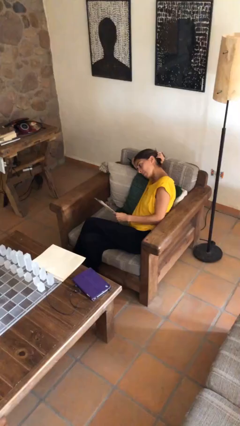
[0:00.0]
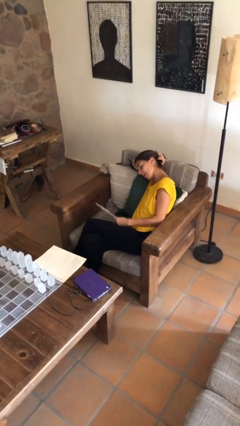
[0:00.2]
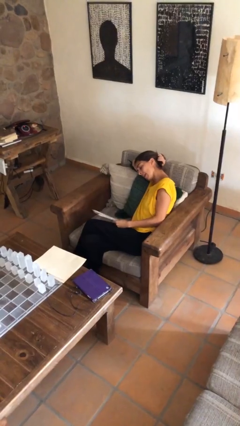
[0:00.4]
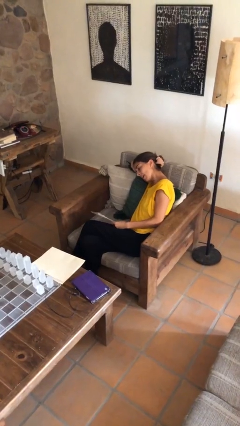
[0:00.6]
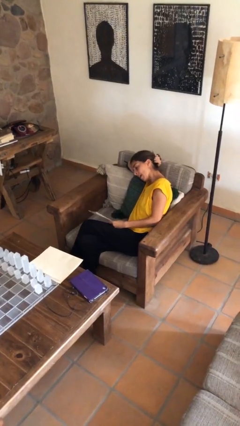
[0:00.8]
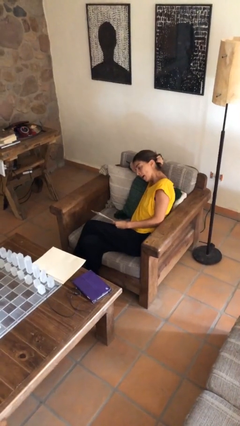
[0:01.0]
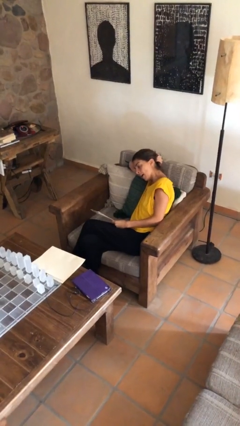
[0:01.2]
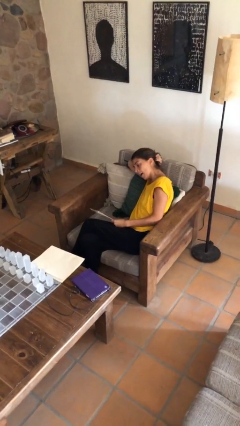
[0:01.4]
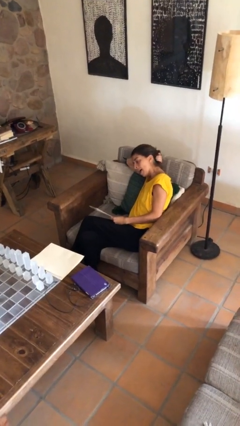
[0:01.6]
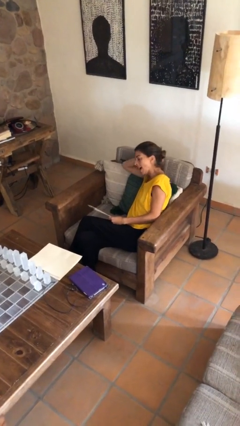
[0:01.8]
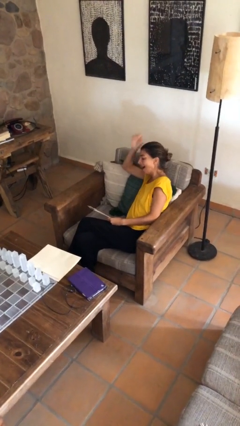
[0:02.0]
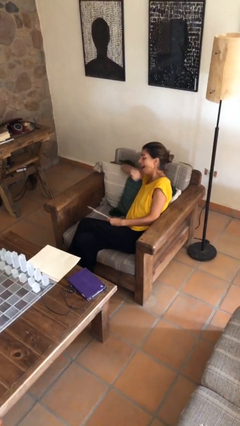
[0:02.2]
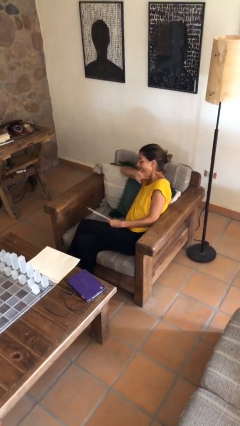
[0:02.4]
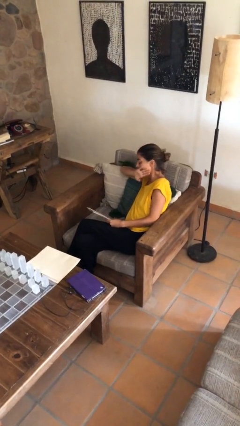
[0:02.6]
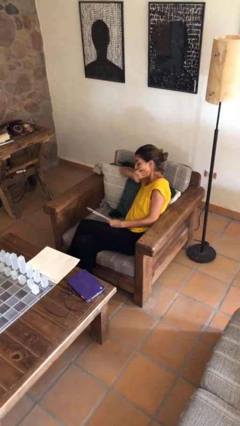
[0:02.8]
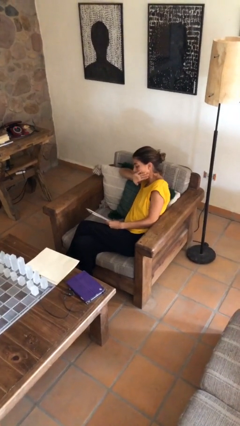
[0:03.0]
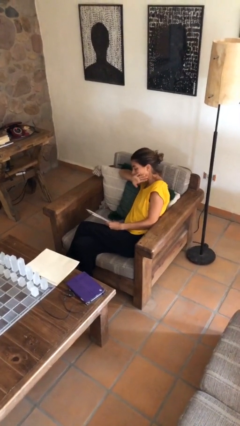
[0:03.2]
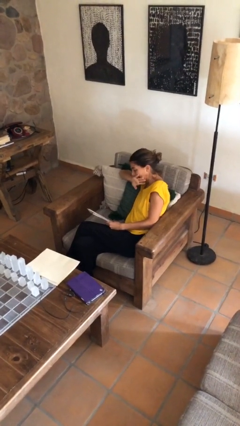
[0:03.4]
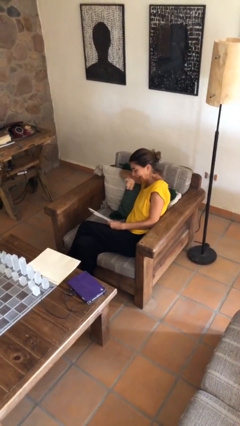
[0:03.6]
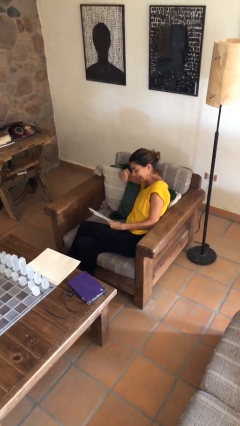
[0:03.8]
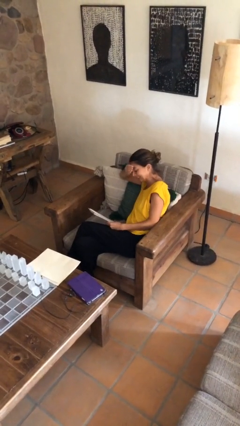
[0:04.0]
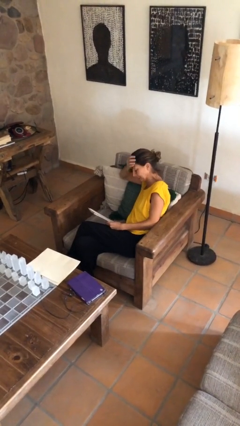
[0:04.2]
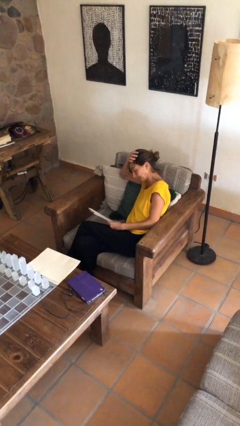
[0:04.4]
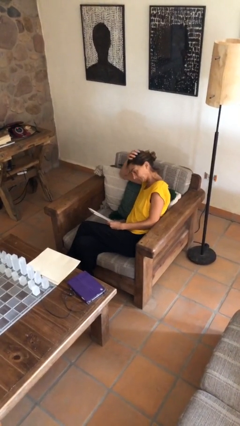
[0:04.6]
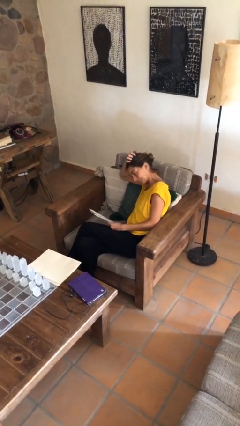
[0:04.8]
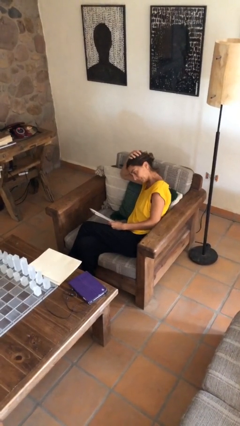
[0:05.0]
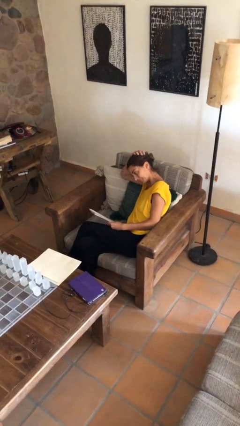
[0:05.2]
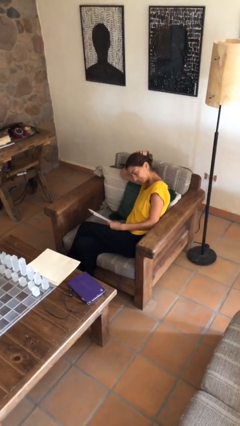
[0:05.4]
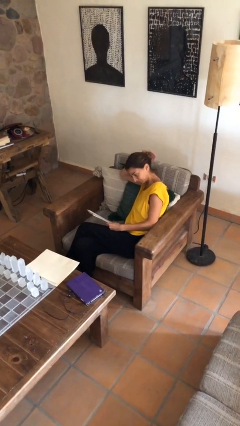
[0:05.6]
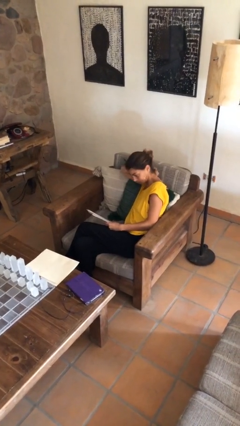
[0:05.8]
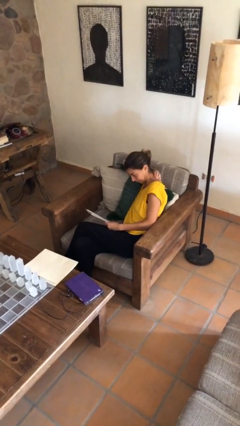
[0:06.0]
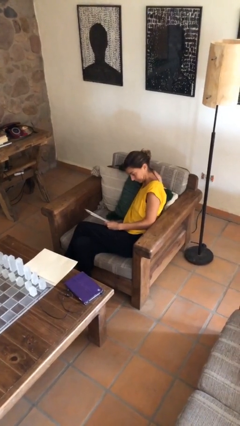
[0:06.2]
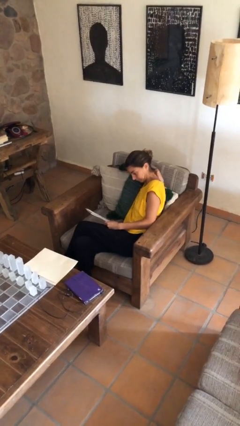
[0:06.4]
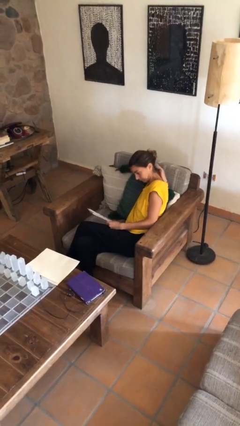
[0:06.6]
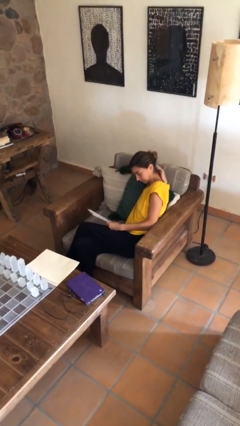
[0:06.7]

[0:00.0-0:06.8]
person reads document

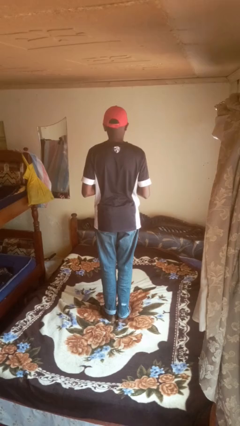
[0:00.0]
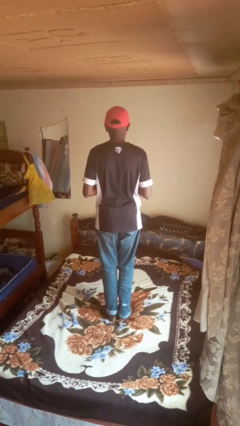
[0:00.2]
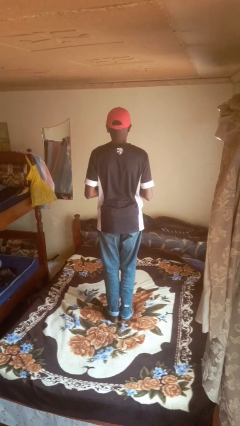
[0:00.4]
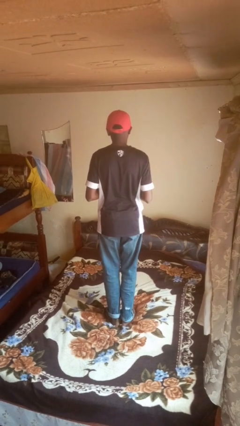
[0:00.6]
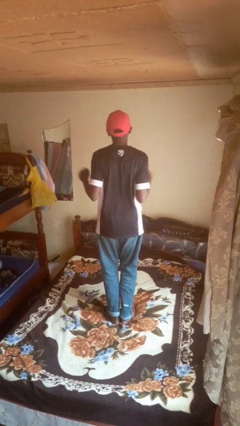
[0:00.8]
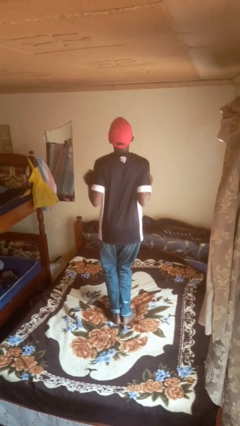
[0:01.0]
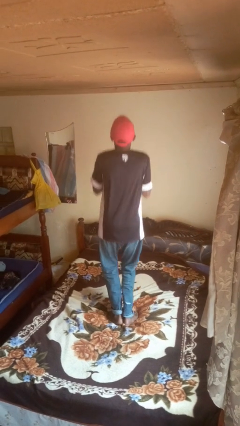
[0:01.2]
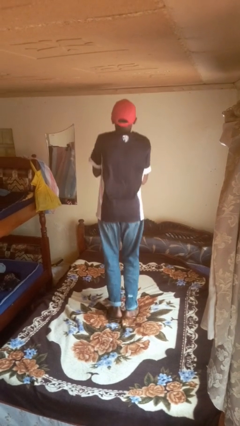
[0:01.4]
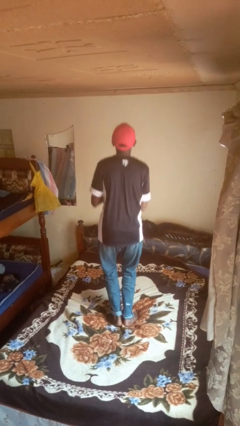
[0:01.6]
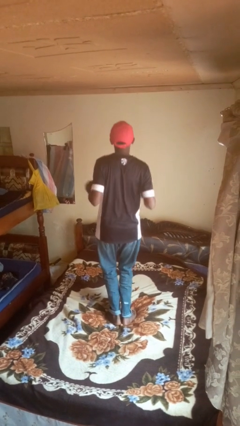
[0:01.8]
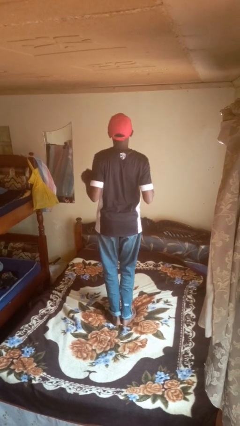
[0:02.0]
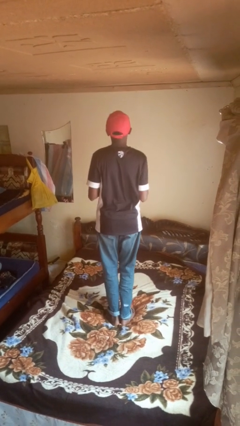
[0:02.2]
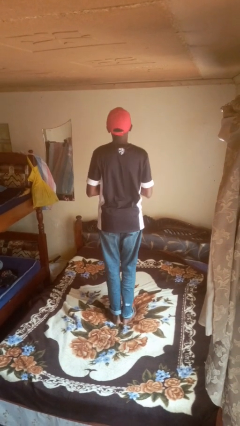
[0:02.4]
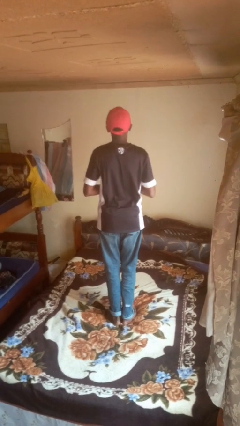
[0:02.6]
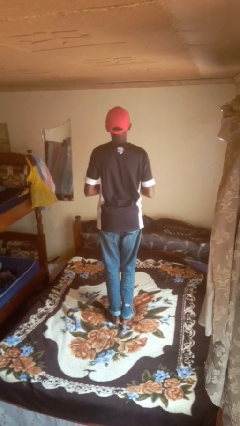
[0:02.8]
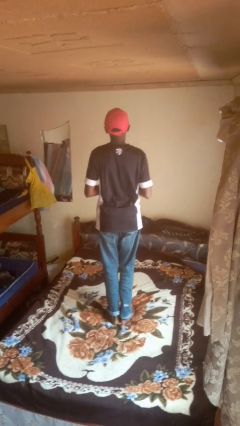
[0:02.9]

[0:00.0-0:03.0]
person jumps on bed

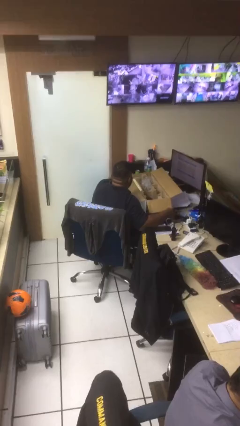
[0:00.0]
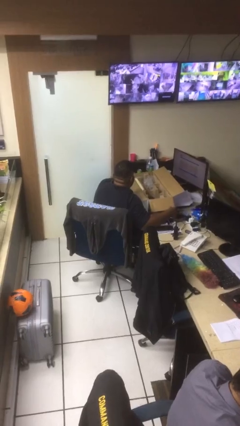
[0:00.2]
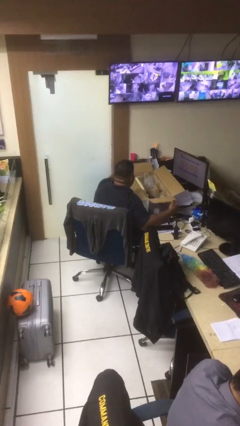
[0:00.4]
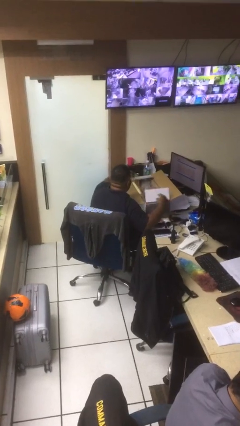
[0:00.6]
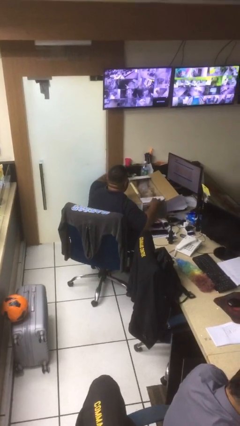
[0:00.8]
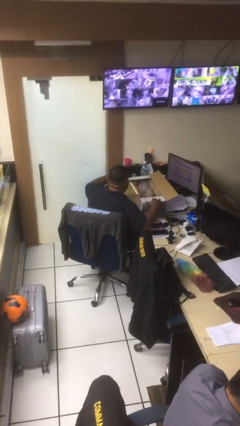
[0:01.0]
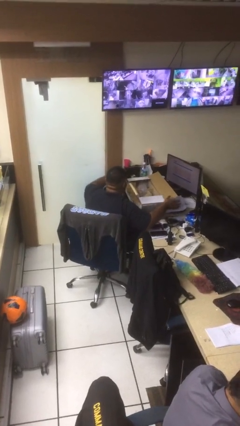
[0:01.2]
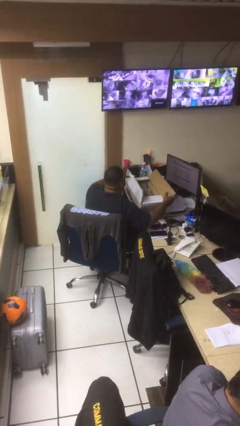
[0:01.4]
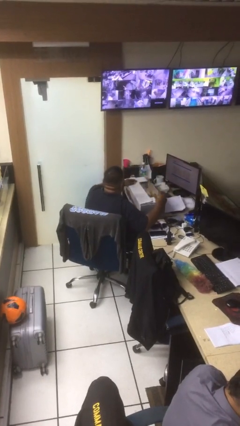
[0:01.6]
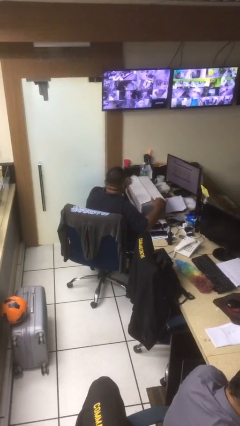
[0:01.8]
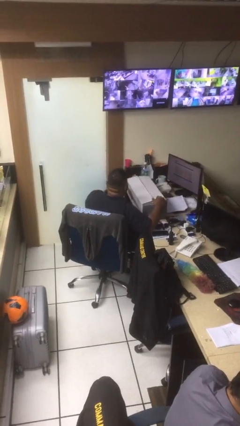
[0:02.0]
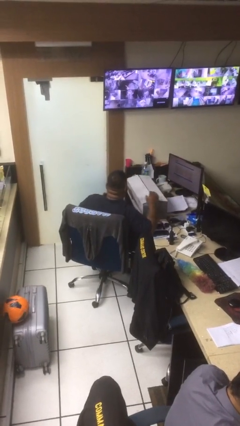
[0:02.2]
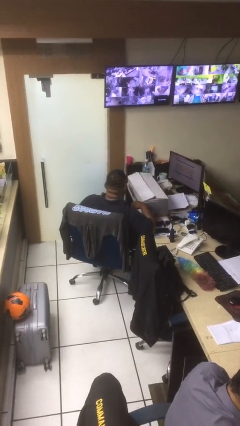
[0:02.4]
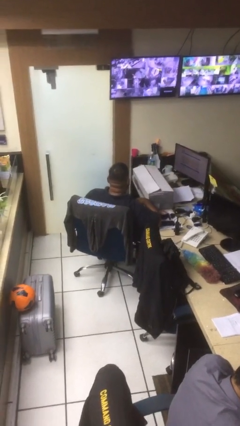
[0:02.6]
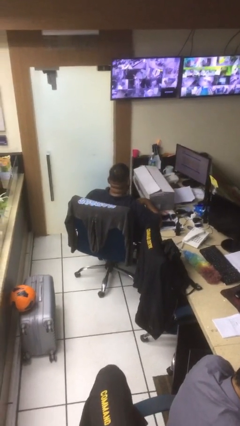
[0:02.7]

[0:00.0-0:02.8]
person closes box

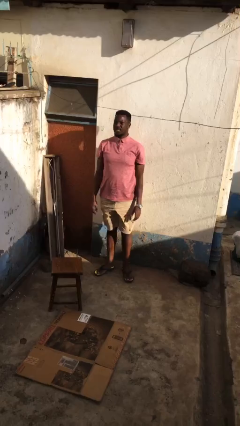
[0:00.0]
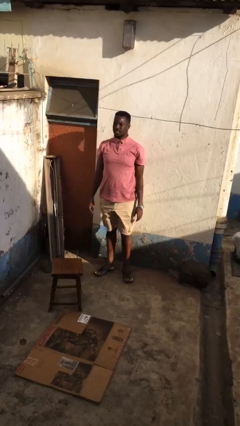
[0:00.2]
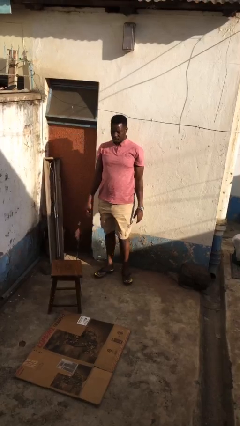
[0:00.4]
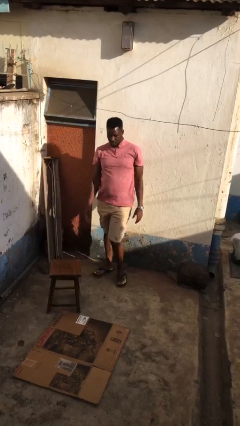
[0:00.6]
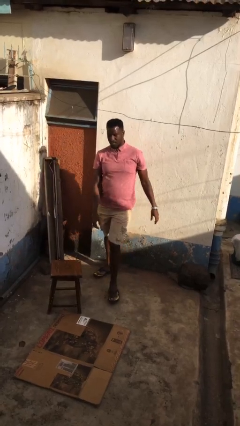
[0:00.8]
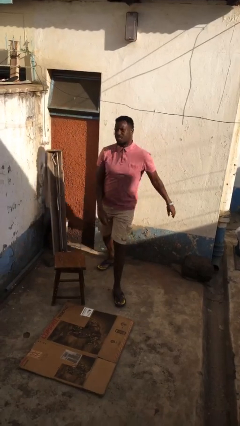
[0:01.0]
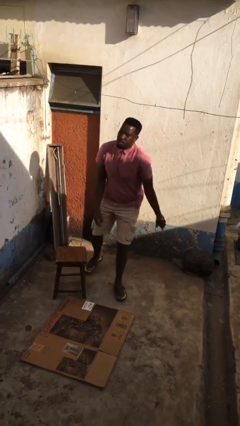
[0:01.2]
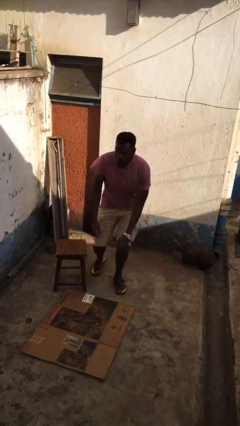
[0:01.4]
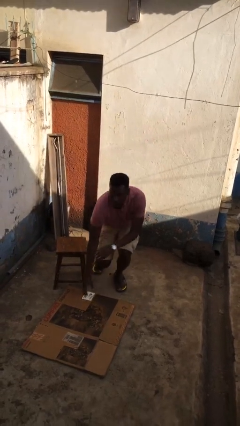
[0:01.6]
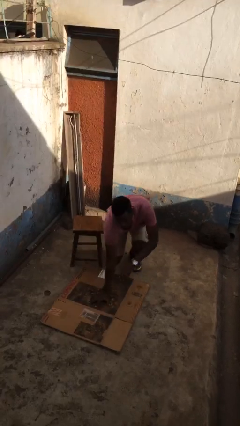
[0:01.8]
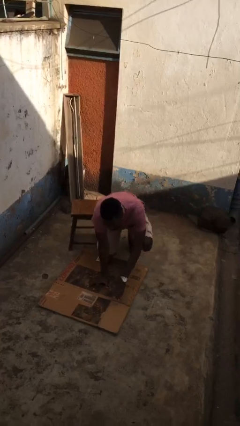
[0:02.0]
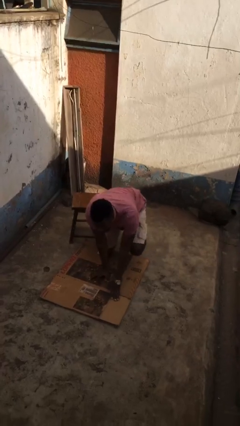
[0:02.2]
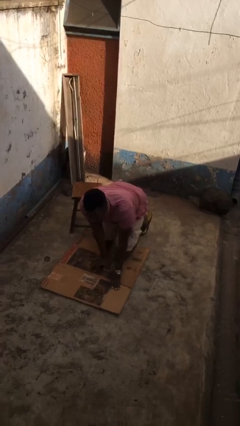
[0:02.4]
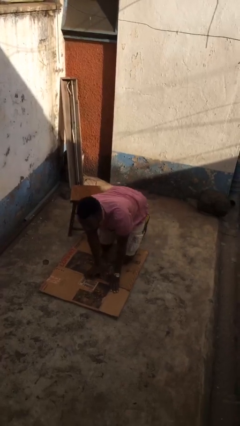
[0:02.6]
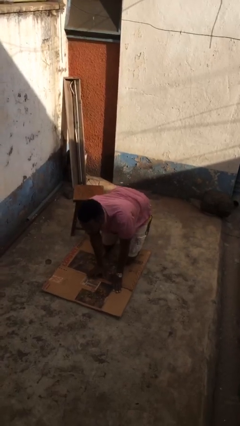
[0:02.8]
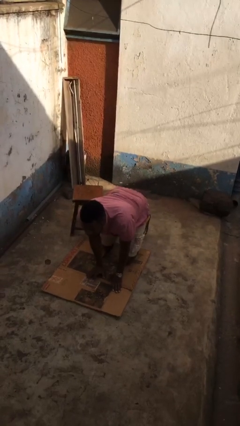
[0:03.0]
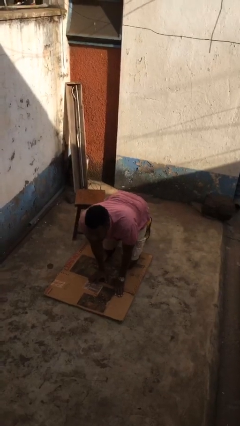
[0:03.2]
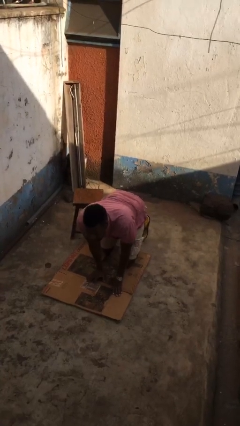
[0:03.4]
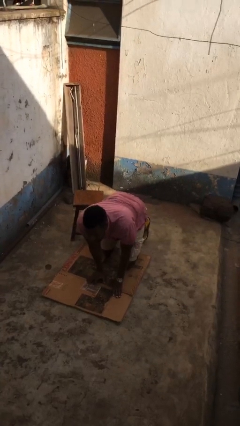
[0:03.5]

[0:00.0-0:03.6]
person trips on object on floor

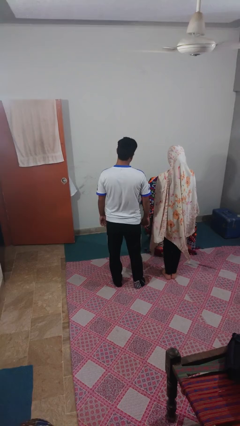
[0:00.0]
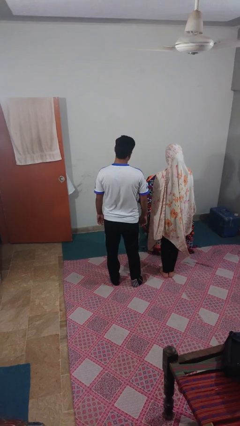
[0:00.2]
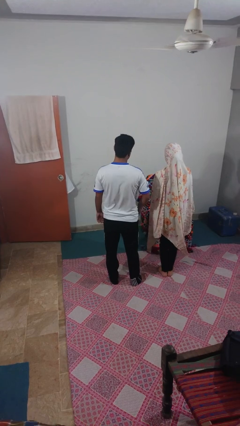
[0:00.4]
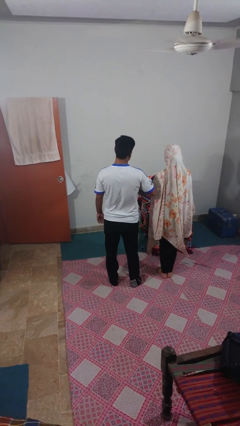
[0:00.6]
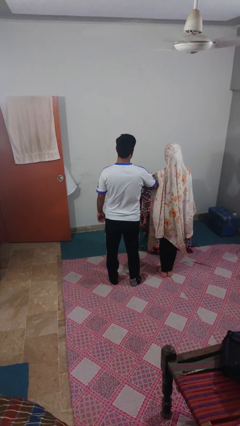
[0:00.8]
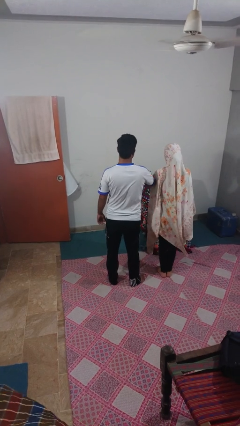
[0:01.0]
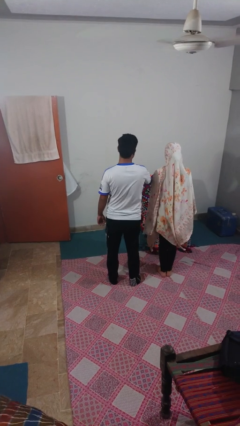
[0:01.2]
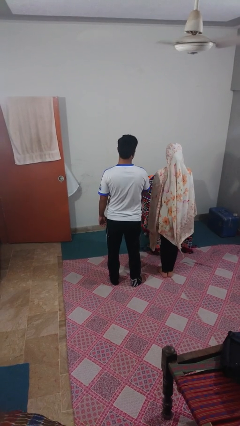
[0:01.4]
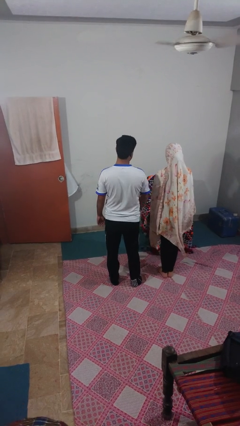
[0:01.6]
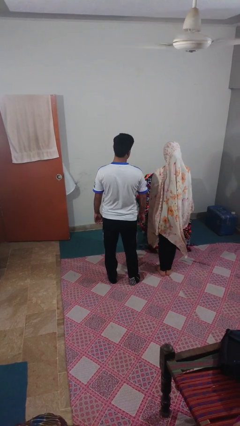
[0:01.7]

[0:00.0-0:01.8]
person nudges person with elbow
